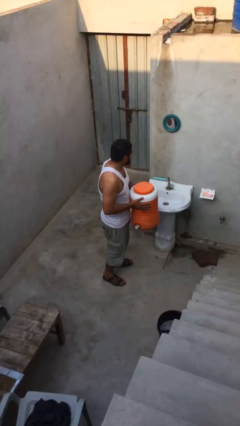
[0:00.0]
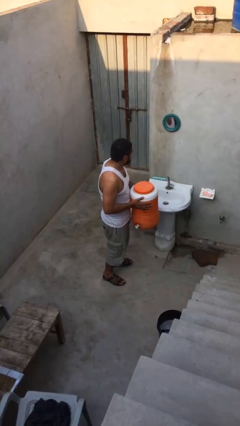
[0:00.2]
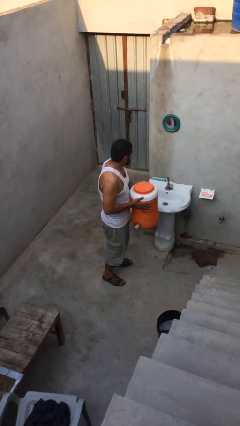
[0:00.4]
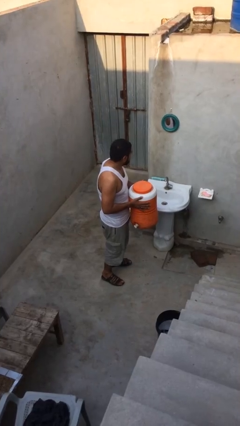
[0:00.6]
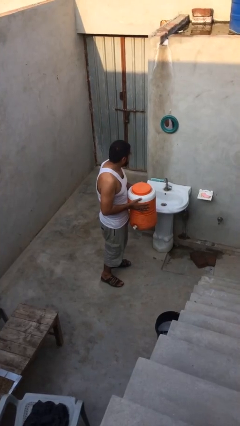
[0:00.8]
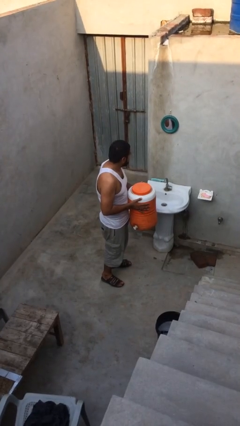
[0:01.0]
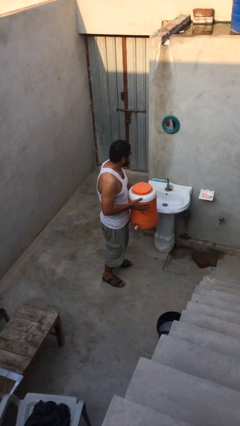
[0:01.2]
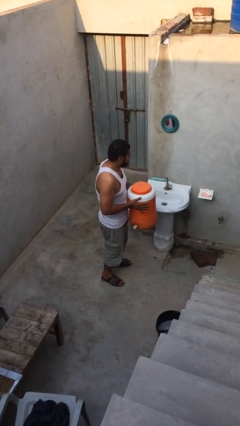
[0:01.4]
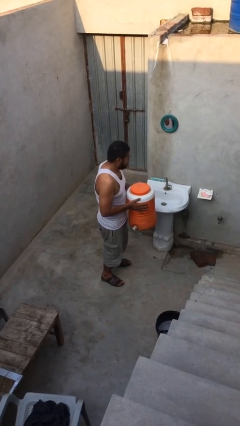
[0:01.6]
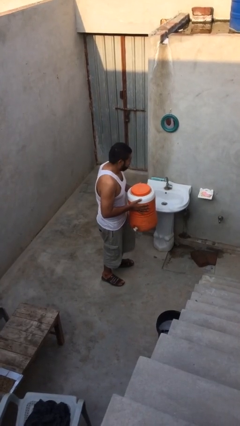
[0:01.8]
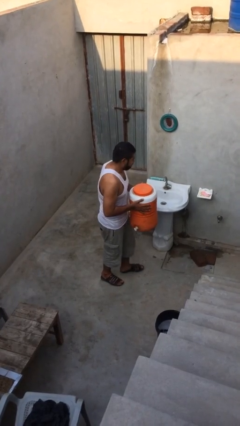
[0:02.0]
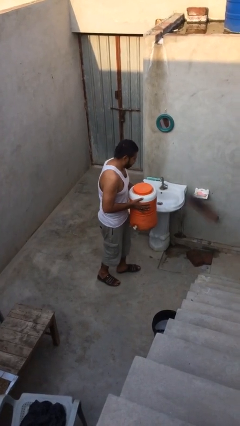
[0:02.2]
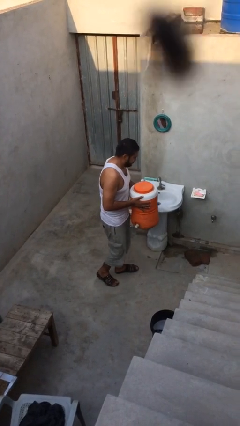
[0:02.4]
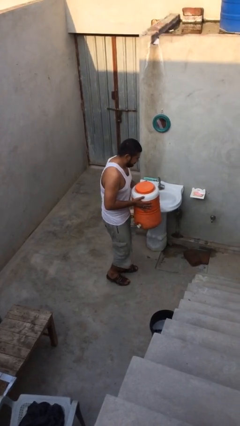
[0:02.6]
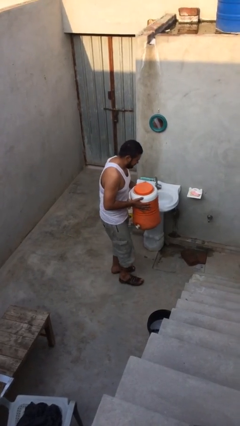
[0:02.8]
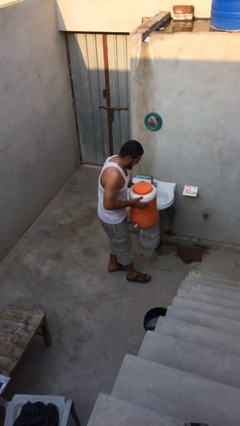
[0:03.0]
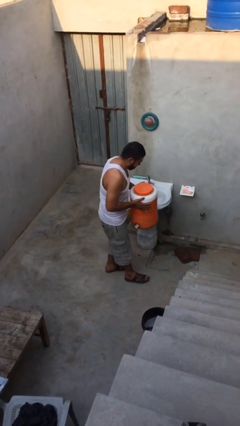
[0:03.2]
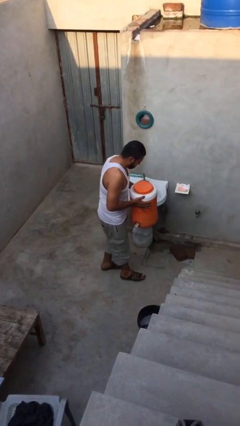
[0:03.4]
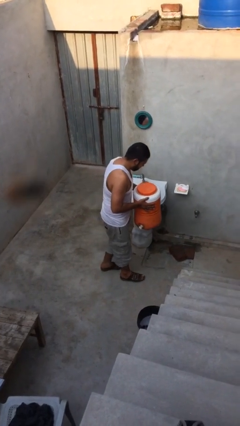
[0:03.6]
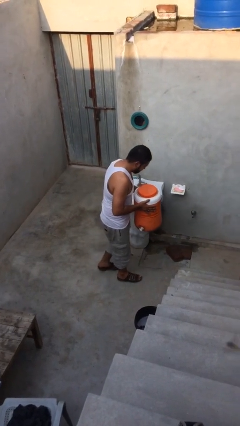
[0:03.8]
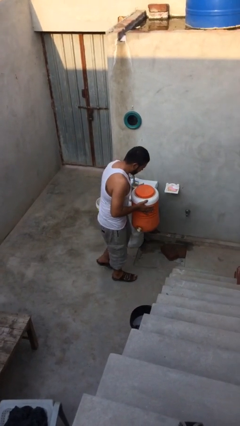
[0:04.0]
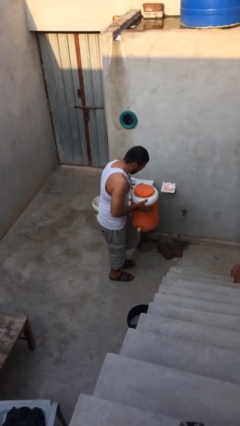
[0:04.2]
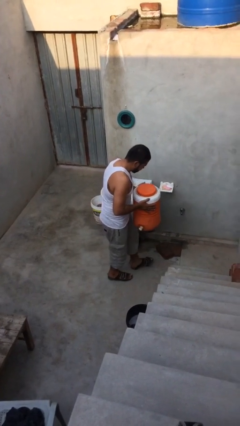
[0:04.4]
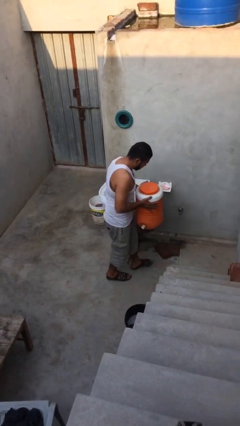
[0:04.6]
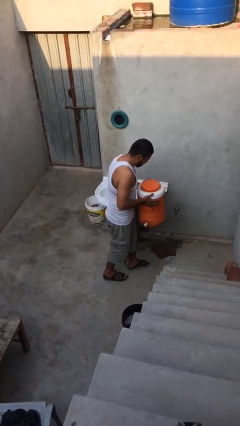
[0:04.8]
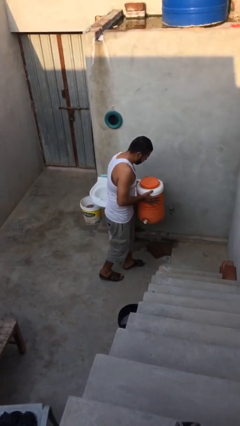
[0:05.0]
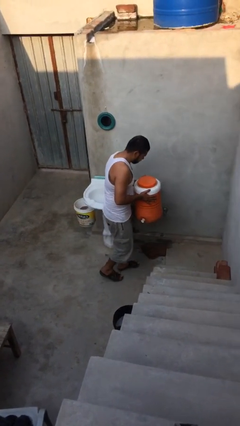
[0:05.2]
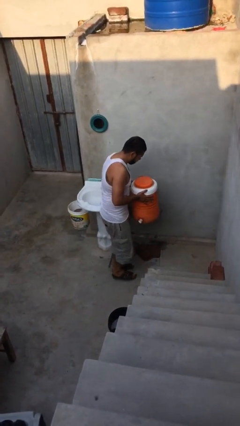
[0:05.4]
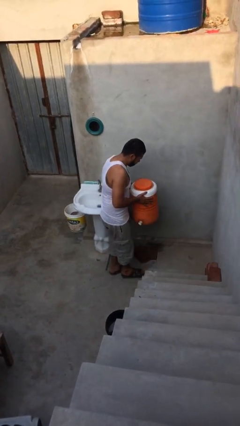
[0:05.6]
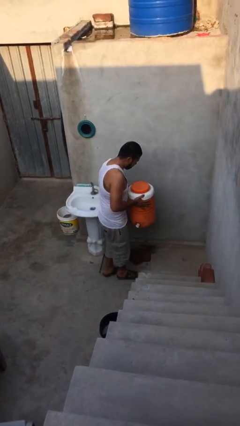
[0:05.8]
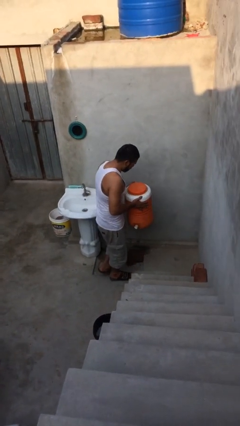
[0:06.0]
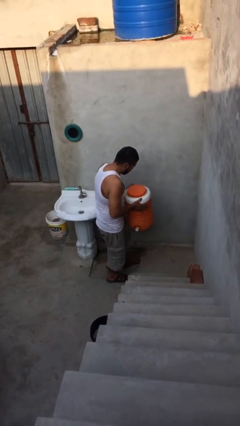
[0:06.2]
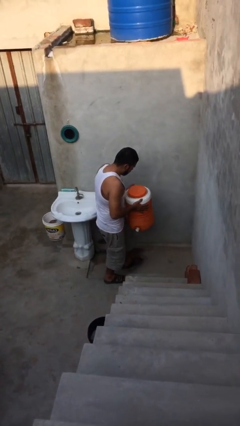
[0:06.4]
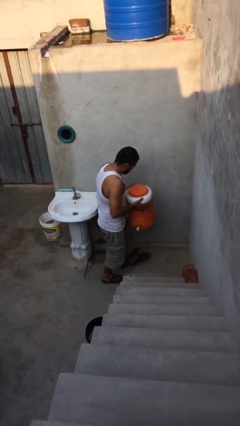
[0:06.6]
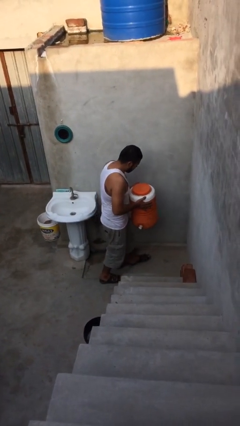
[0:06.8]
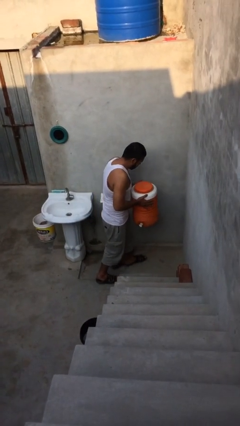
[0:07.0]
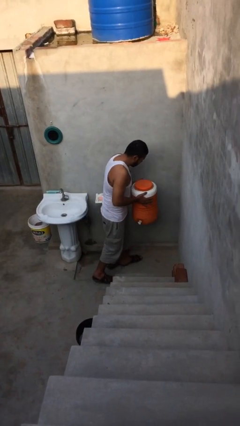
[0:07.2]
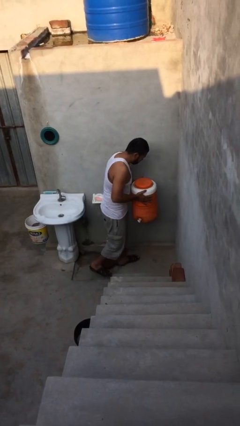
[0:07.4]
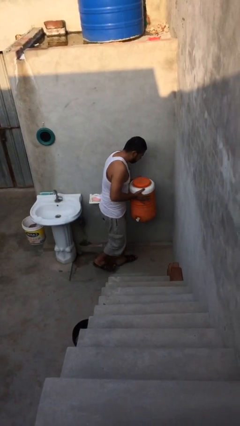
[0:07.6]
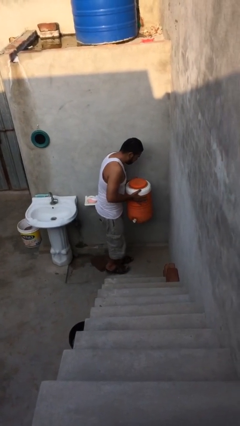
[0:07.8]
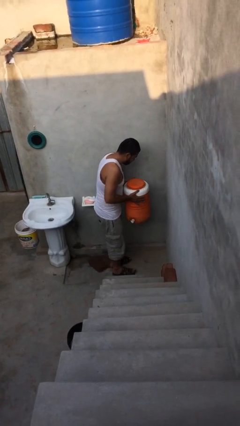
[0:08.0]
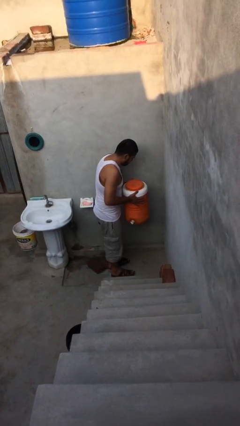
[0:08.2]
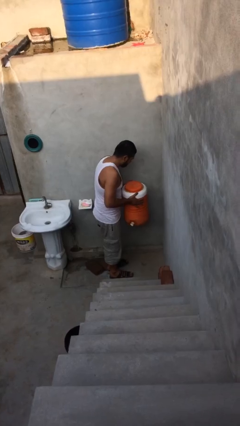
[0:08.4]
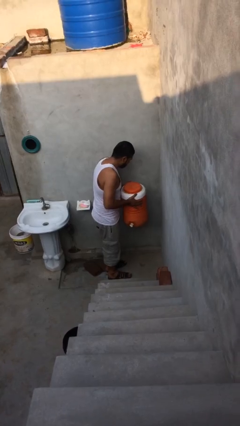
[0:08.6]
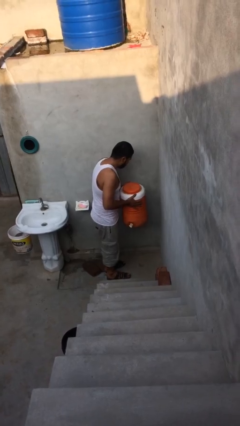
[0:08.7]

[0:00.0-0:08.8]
person carries heavy object

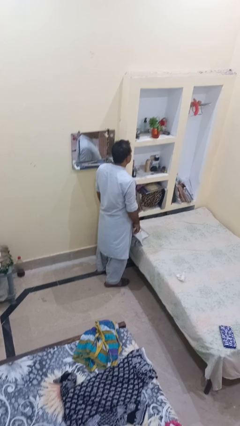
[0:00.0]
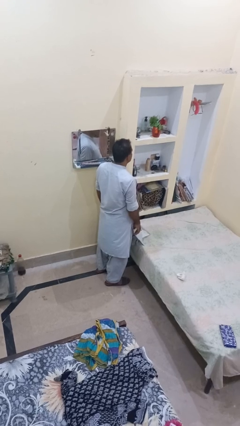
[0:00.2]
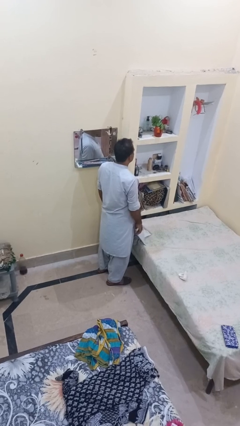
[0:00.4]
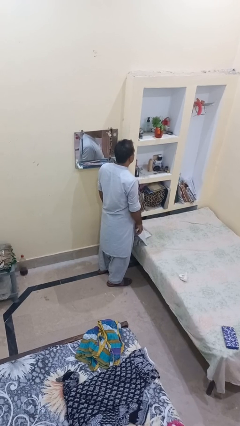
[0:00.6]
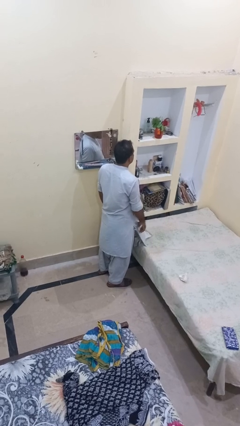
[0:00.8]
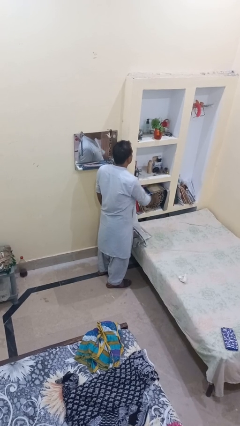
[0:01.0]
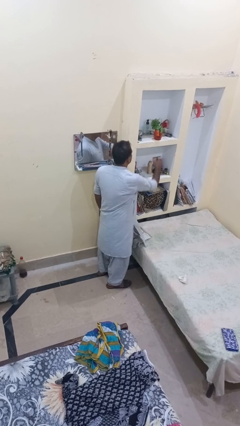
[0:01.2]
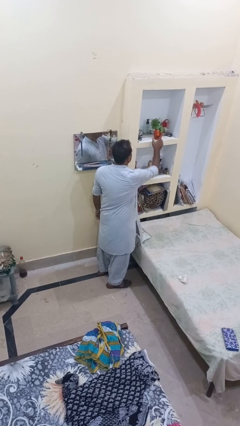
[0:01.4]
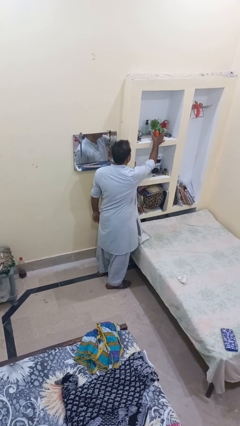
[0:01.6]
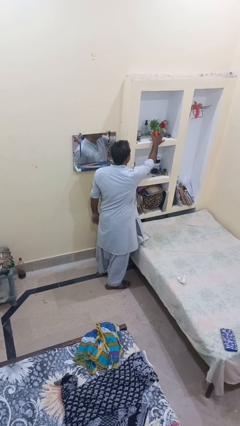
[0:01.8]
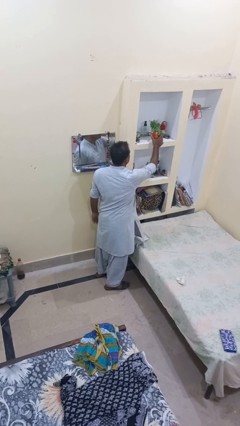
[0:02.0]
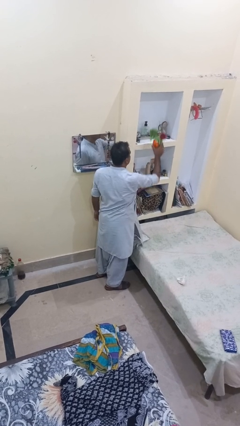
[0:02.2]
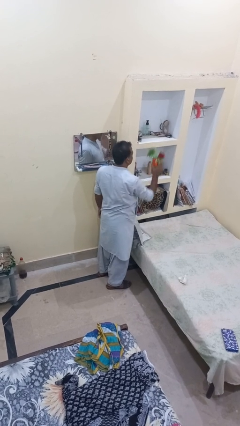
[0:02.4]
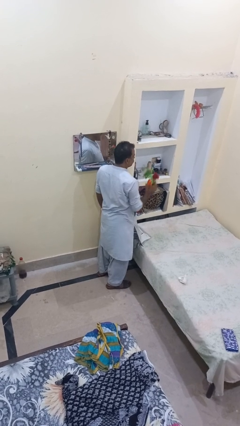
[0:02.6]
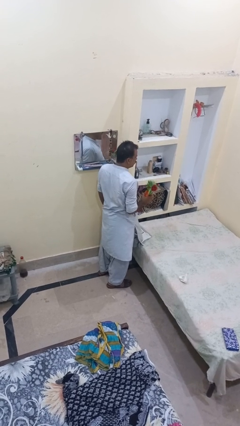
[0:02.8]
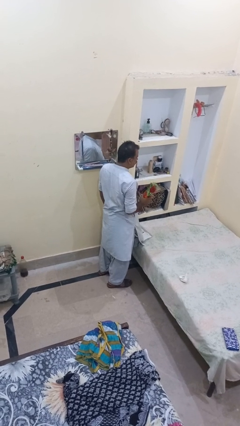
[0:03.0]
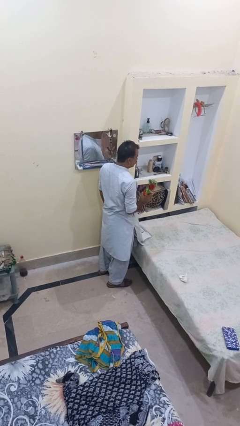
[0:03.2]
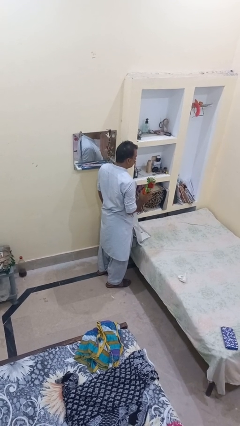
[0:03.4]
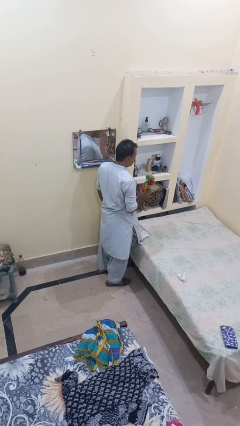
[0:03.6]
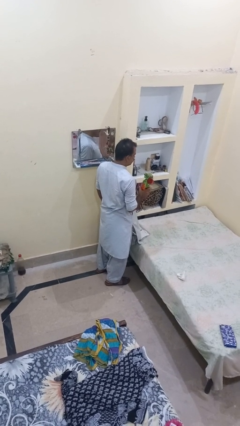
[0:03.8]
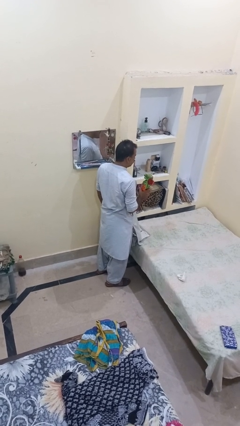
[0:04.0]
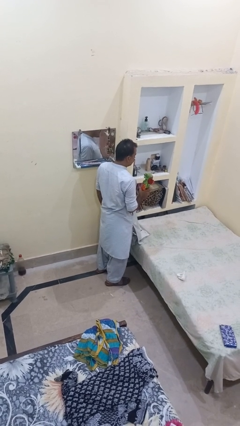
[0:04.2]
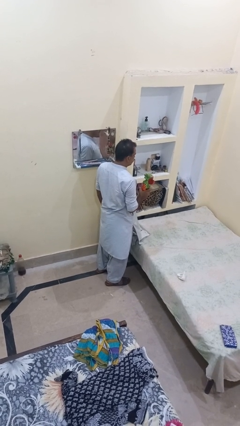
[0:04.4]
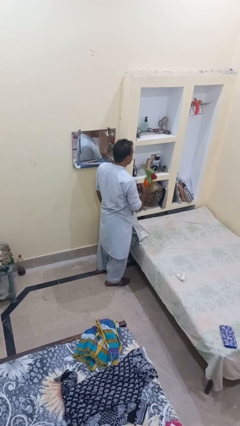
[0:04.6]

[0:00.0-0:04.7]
person picks up object from shelf

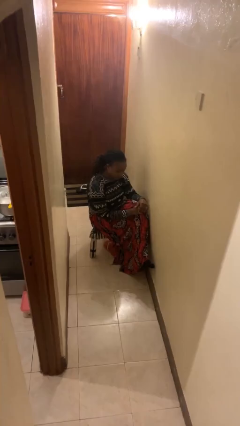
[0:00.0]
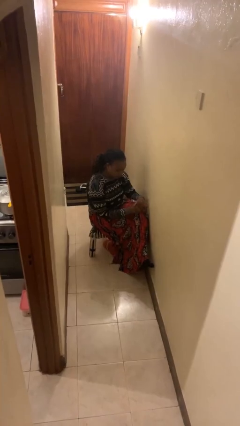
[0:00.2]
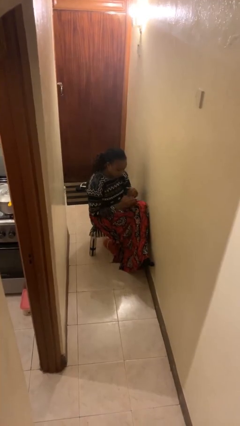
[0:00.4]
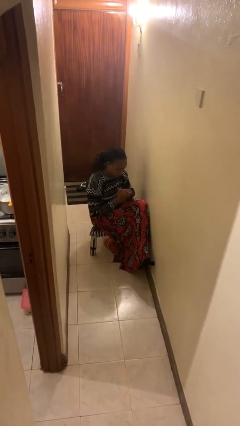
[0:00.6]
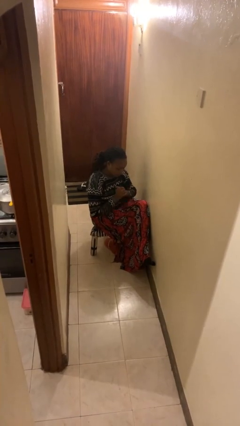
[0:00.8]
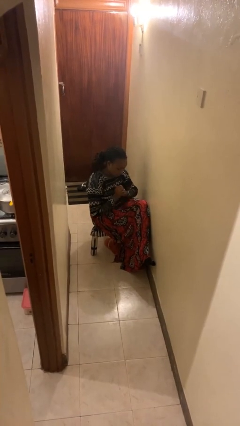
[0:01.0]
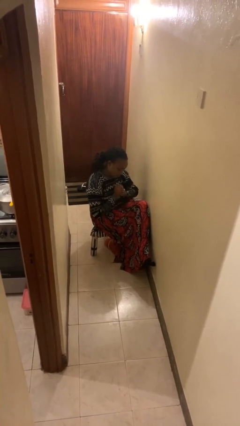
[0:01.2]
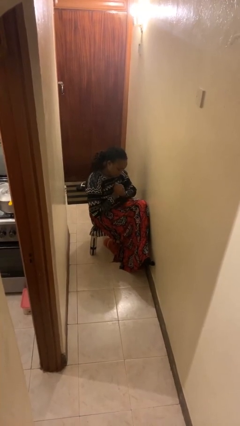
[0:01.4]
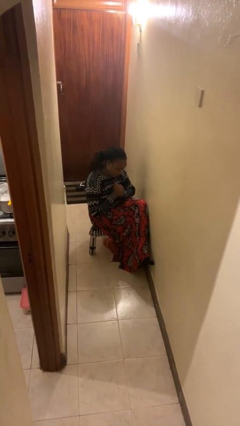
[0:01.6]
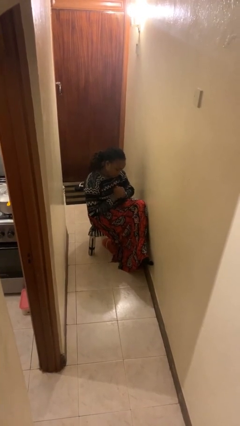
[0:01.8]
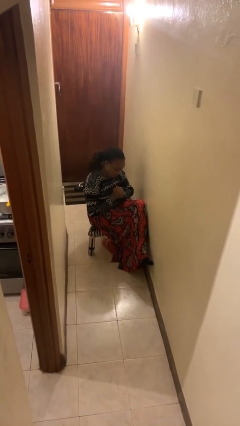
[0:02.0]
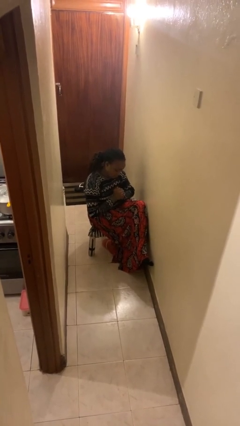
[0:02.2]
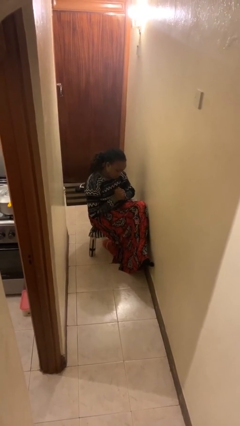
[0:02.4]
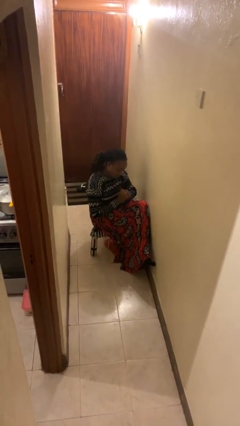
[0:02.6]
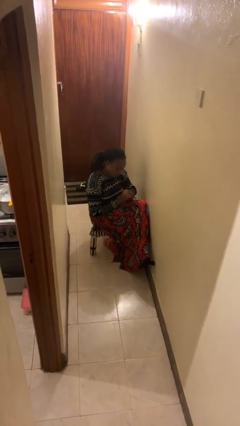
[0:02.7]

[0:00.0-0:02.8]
person cracks knuckles

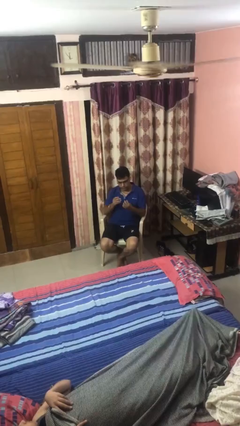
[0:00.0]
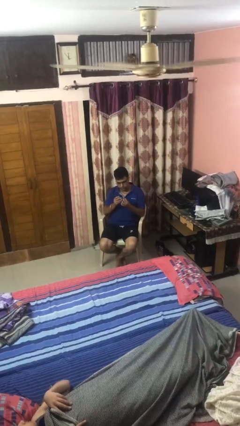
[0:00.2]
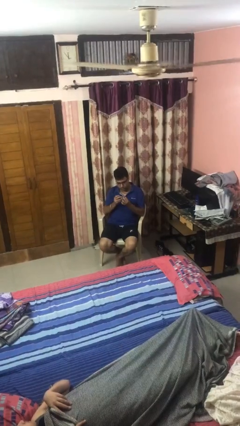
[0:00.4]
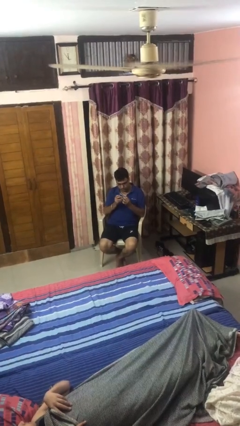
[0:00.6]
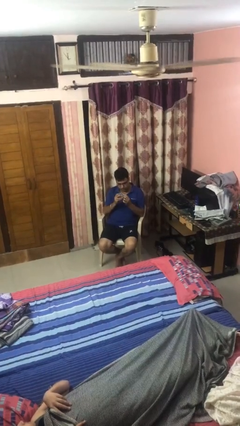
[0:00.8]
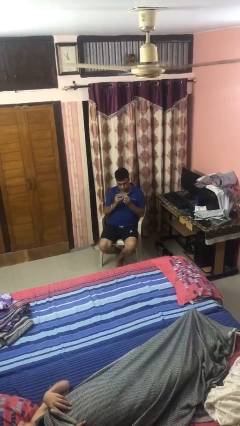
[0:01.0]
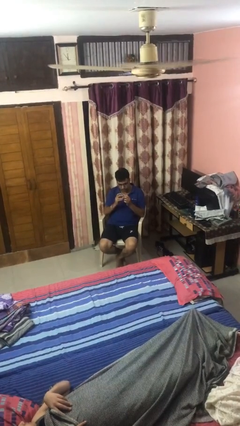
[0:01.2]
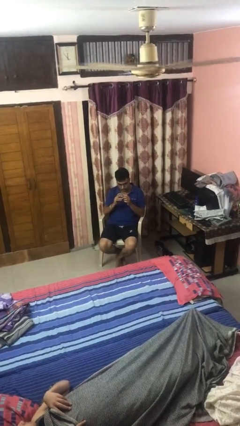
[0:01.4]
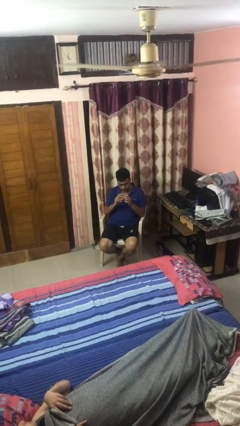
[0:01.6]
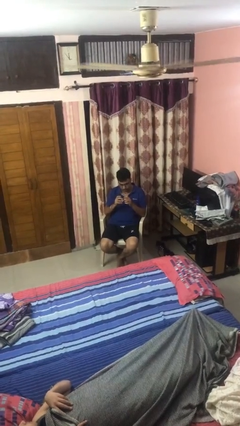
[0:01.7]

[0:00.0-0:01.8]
person clips fingernails
